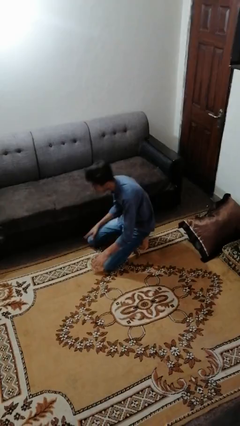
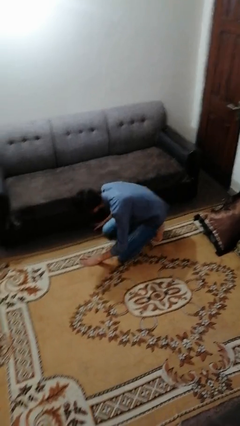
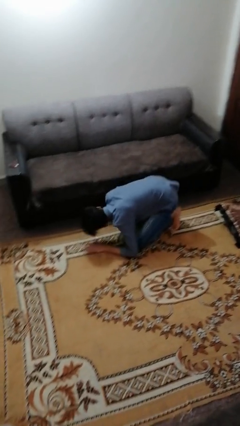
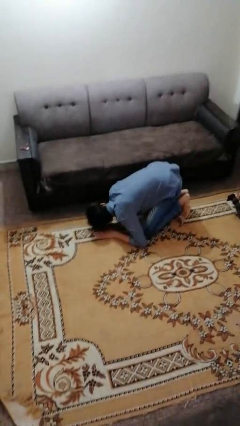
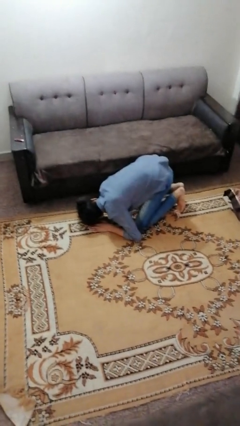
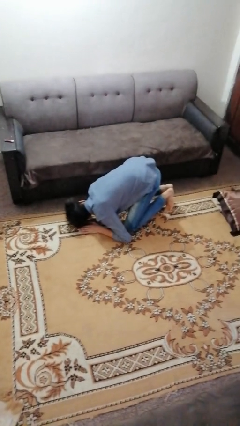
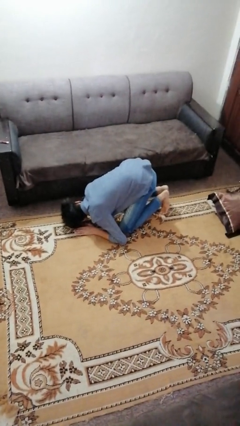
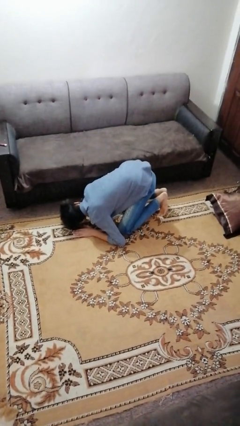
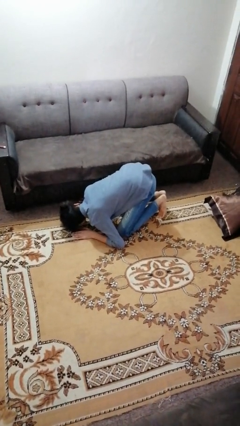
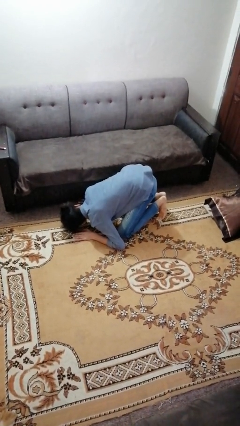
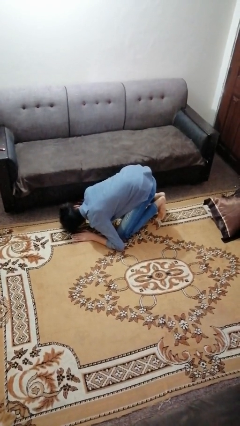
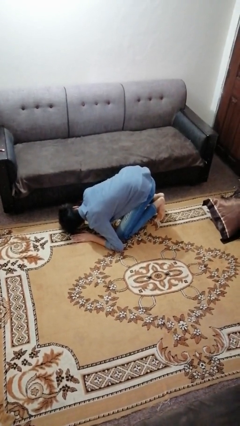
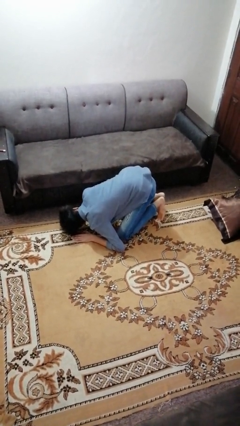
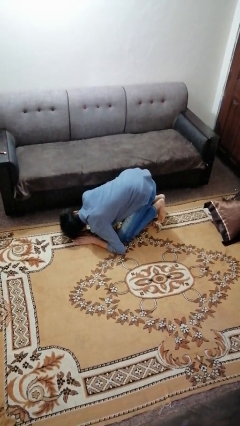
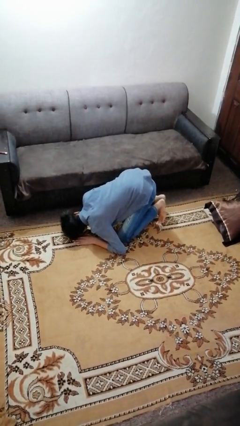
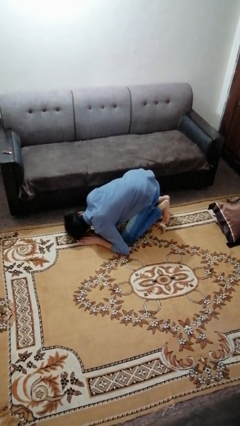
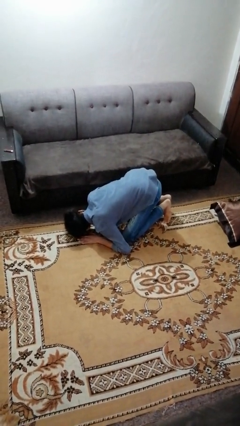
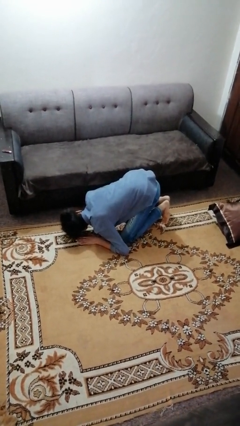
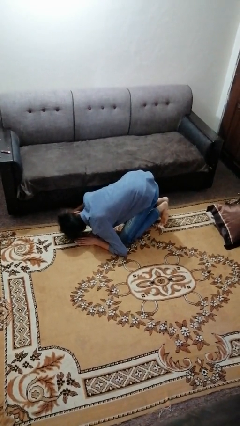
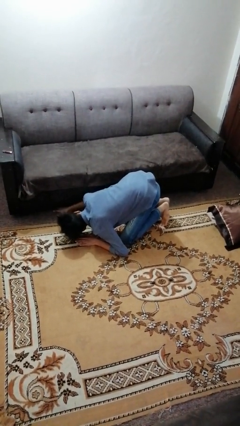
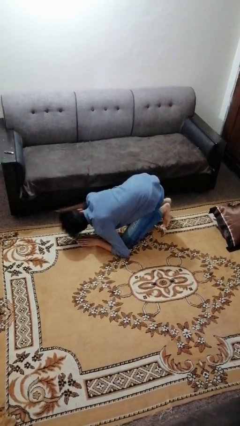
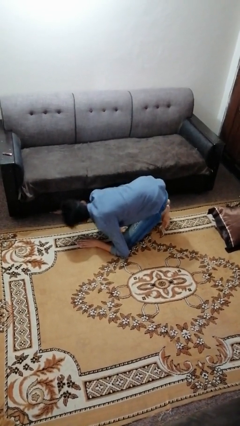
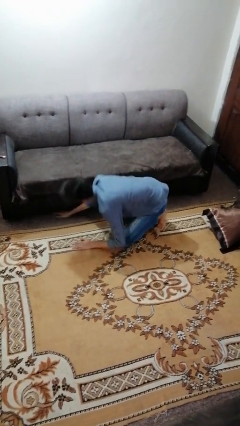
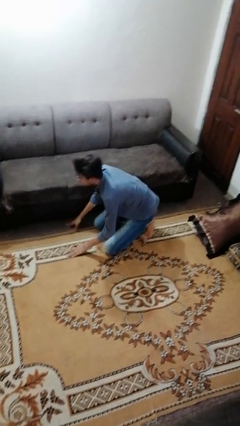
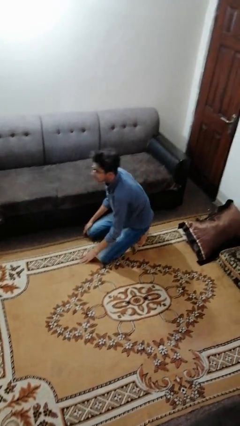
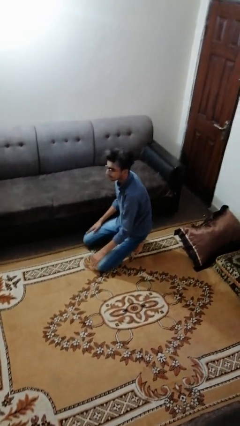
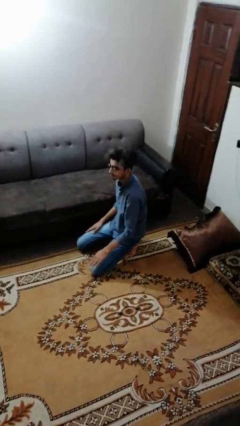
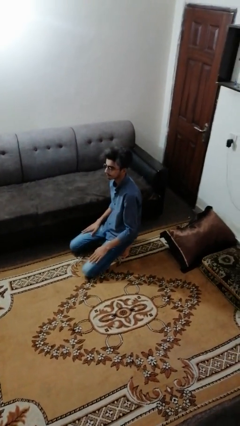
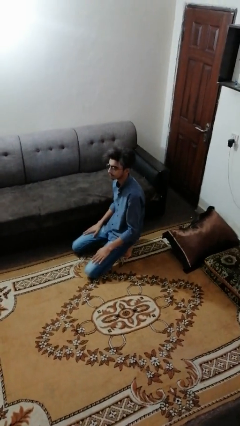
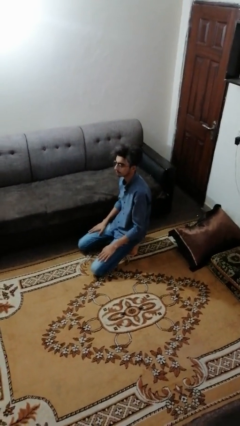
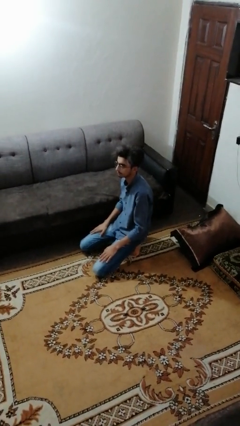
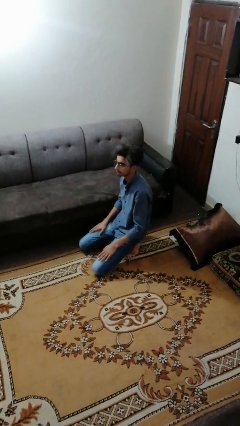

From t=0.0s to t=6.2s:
person searches under couch

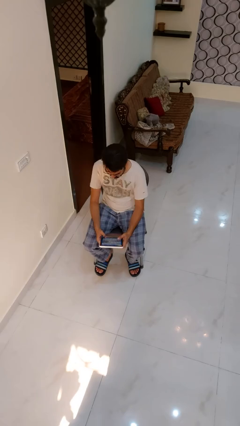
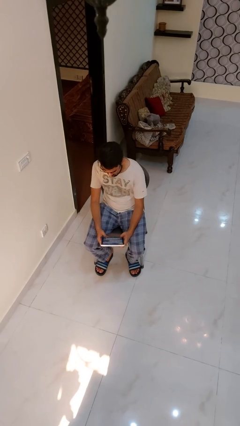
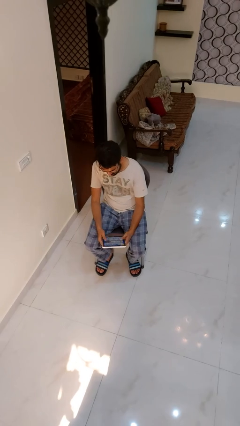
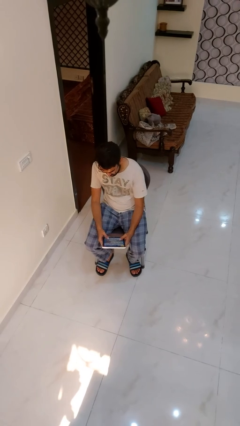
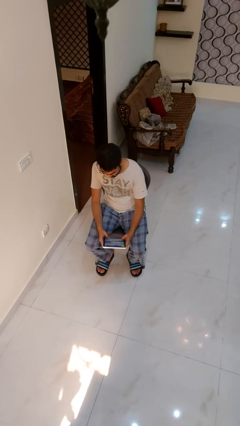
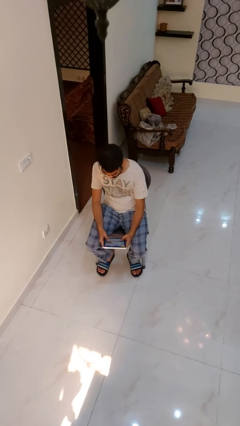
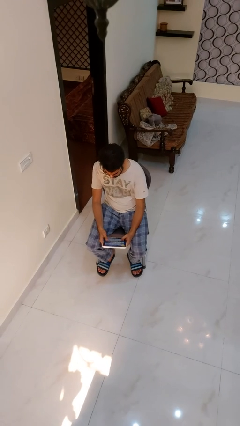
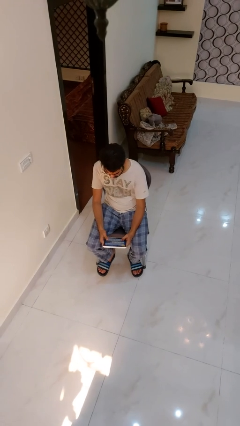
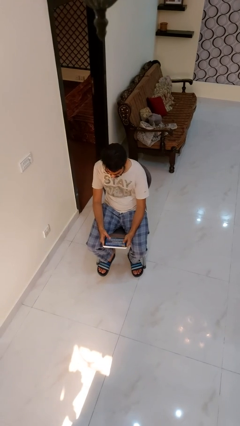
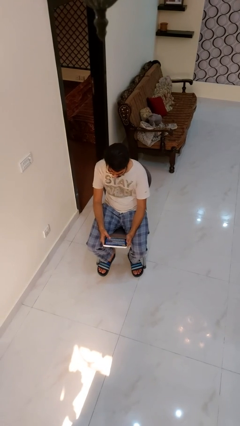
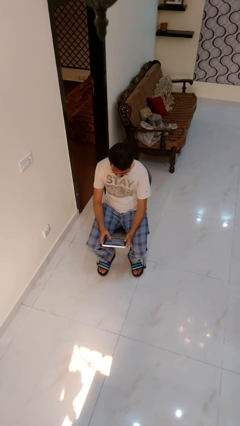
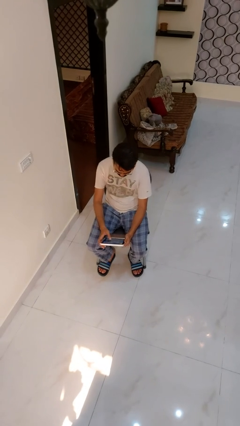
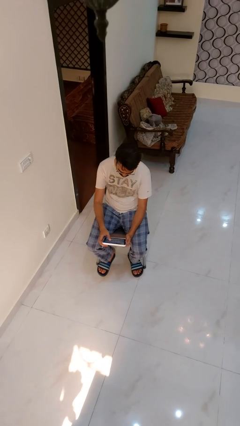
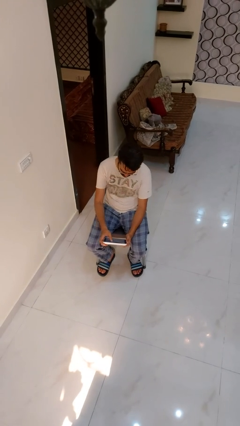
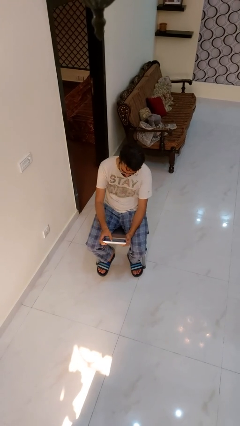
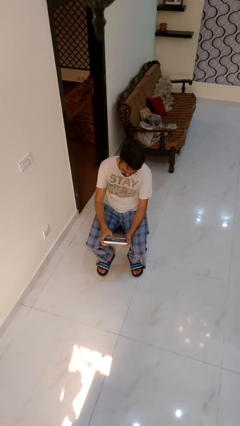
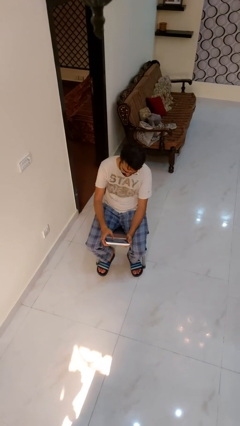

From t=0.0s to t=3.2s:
person interacts with tablet

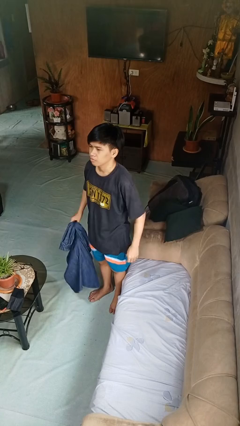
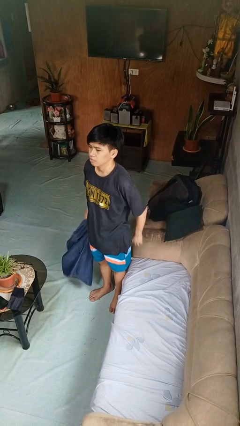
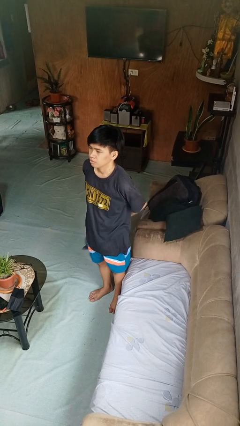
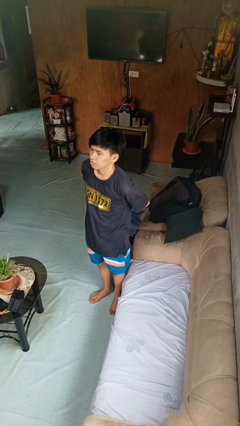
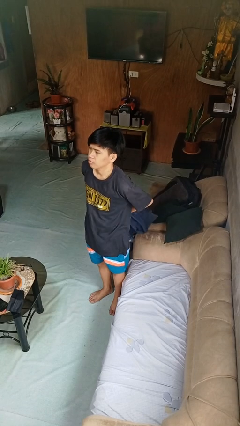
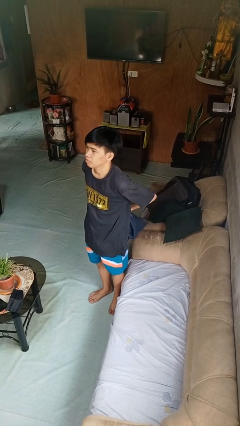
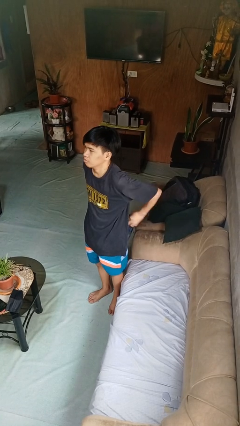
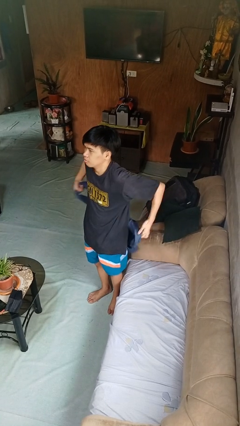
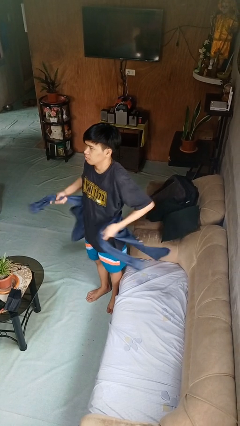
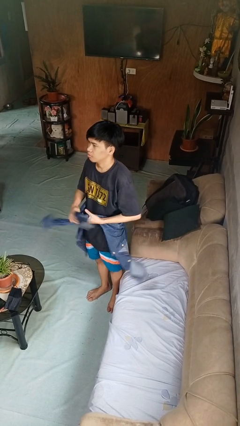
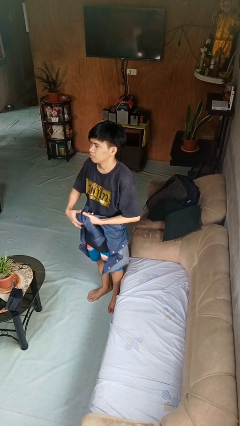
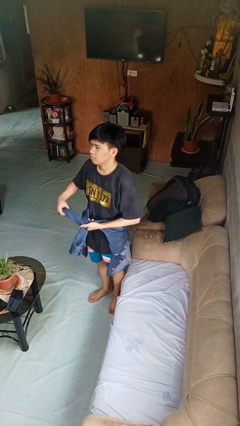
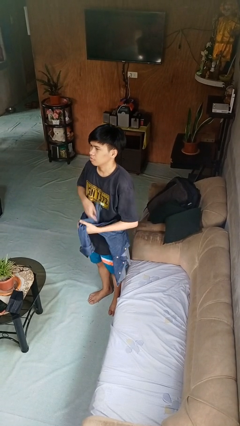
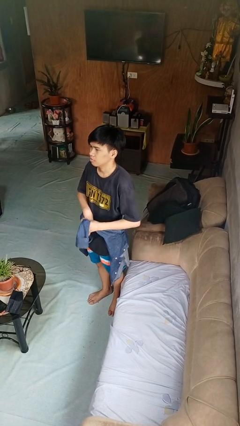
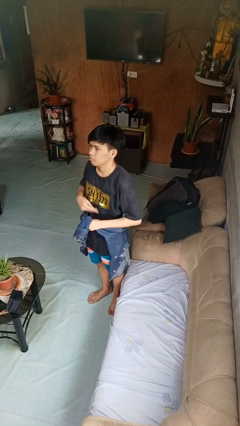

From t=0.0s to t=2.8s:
person ties jacket around waist

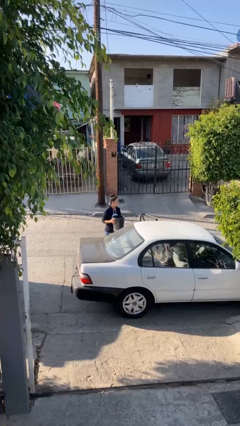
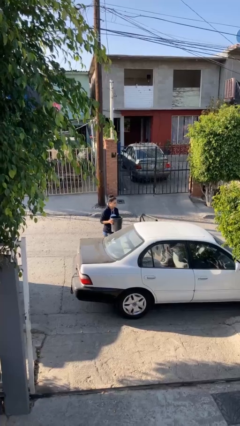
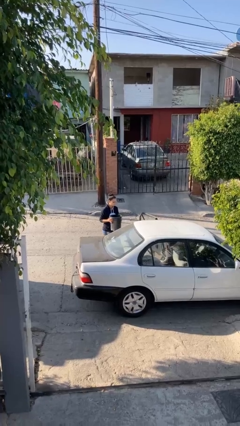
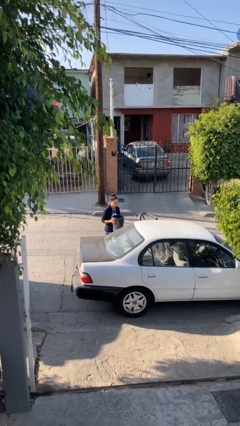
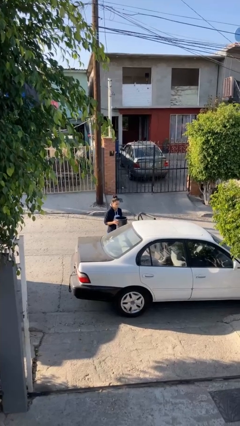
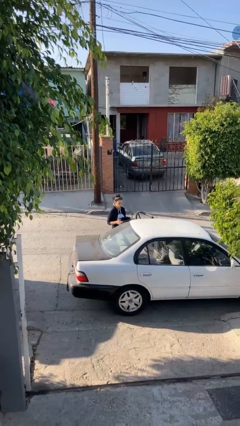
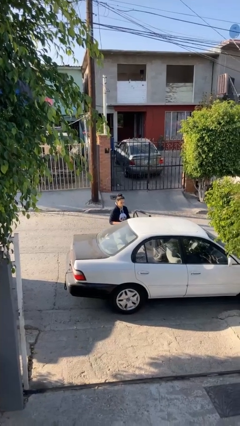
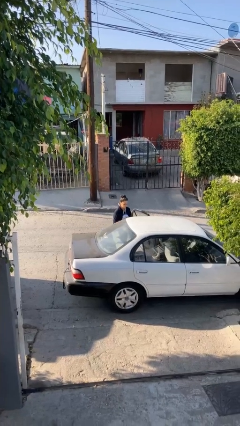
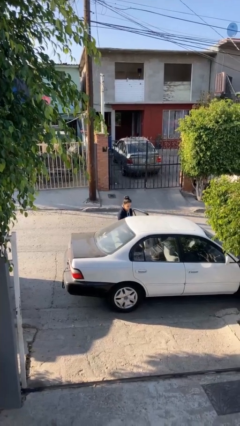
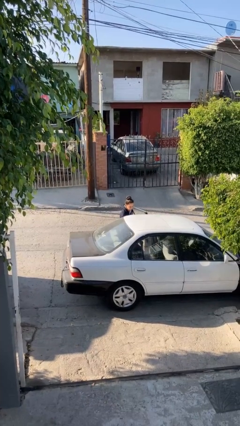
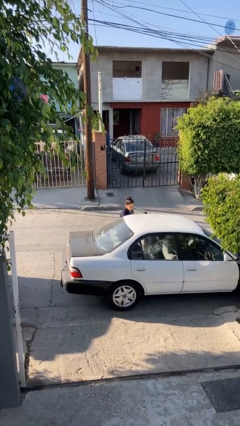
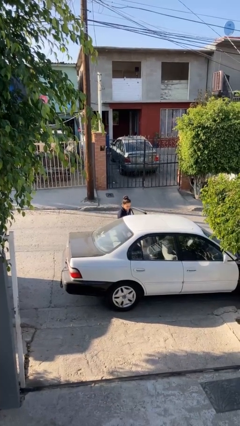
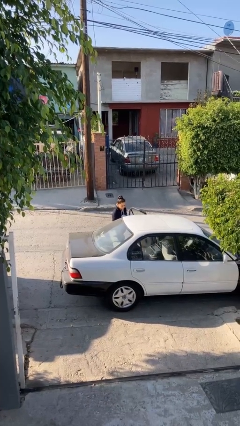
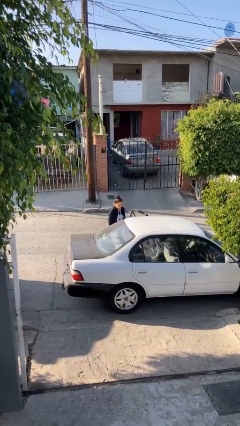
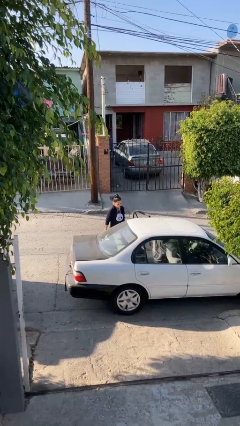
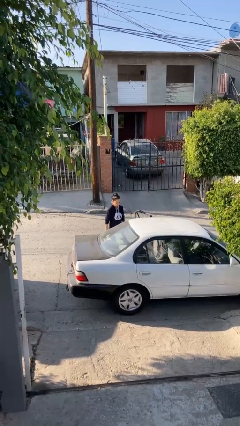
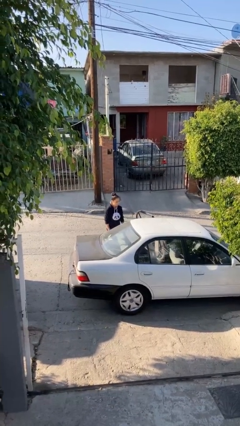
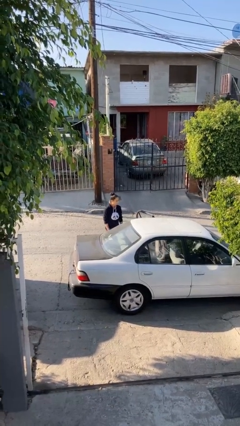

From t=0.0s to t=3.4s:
person loads car

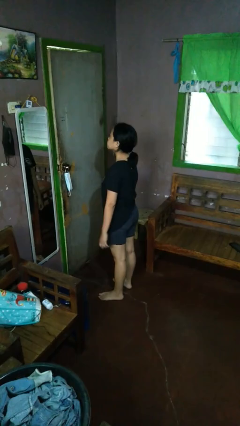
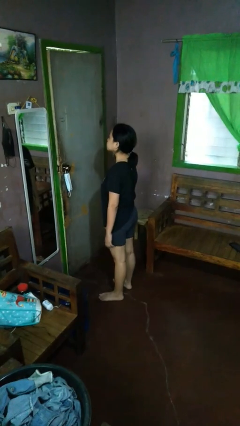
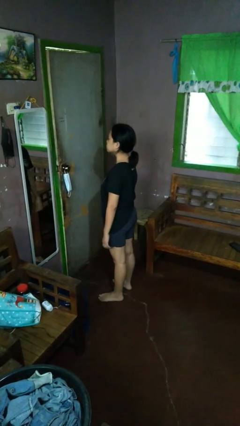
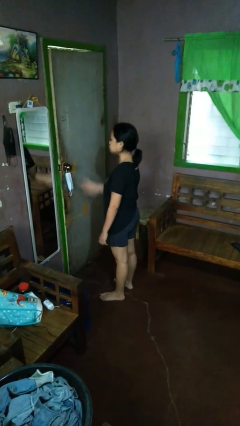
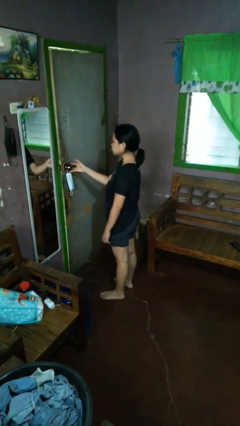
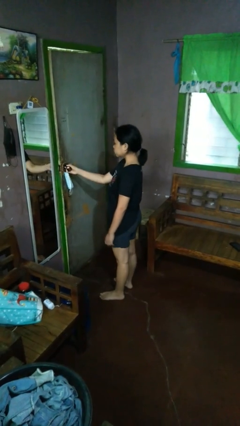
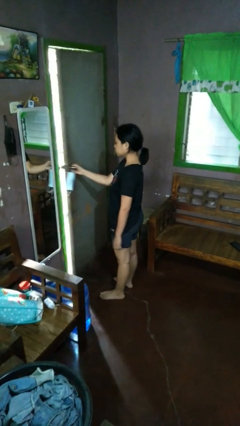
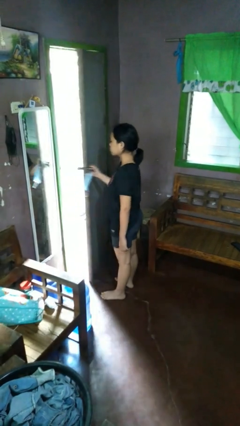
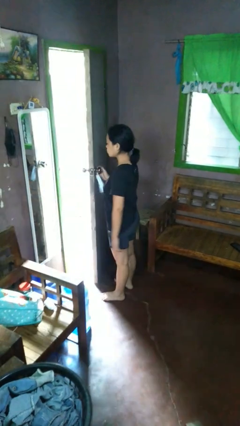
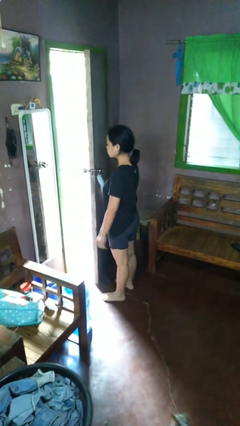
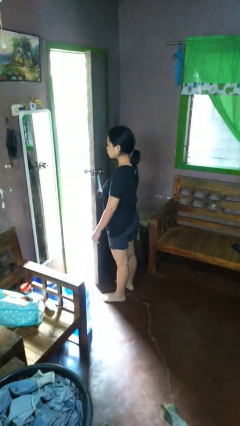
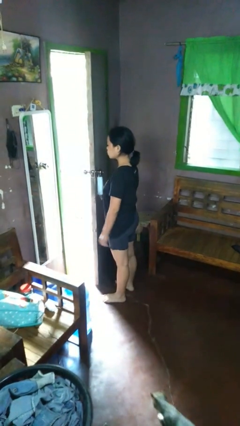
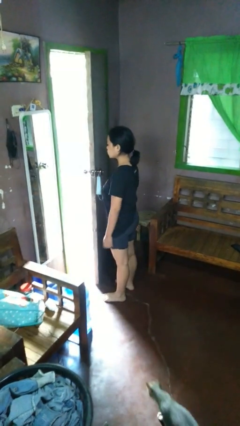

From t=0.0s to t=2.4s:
person opens facility door
